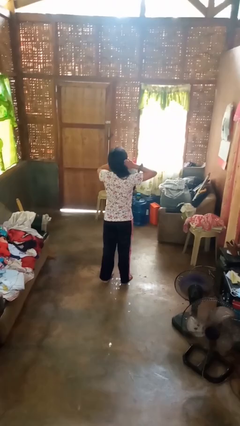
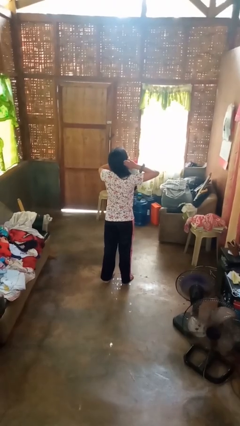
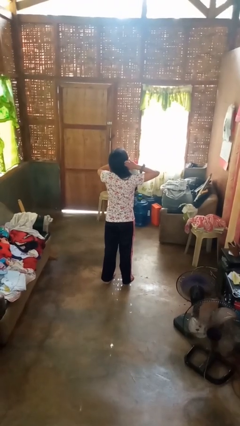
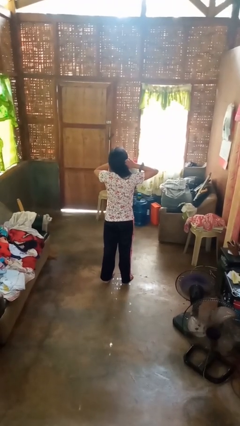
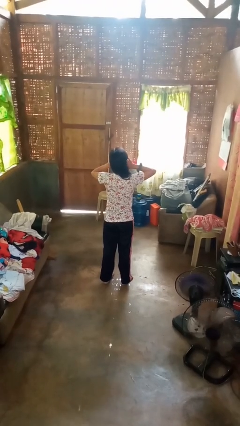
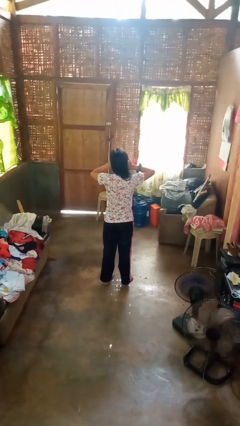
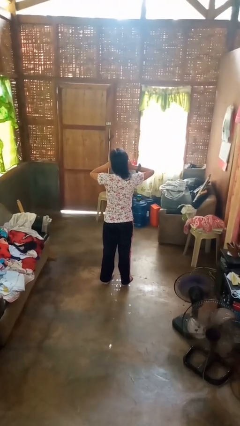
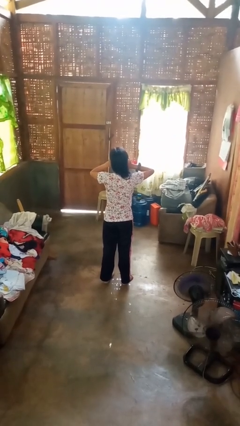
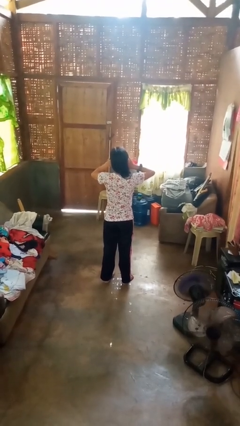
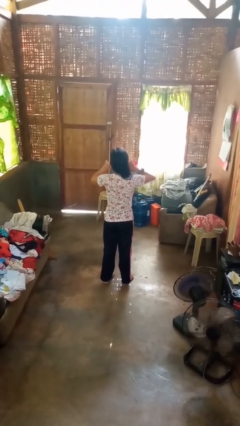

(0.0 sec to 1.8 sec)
person puts fingers in ear

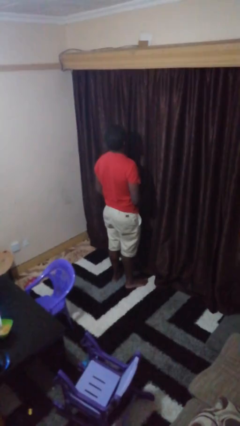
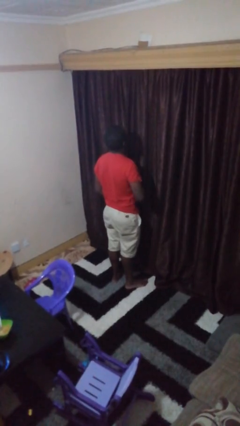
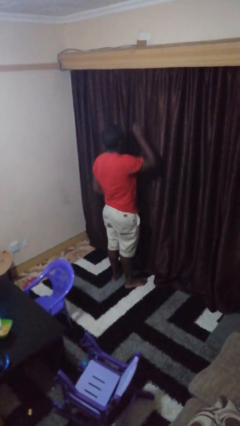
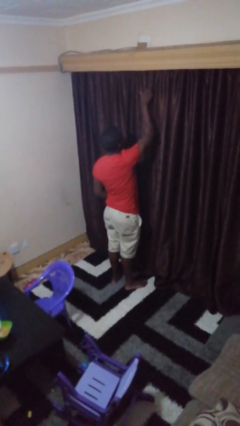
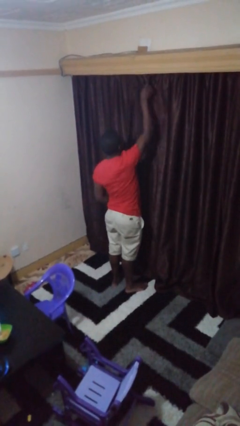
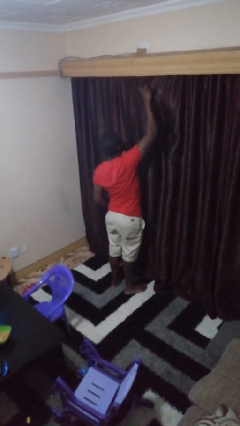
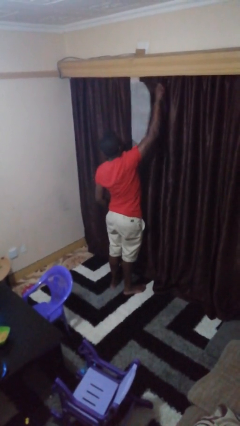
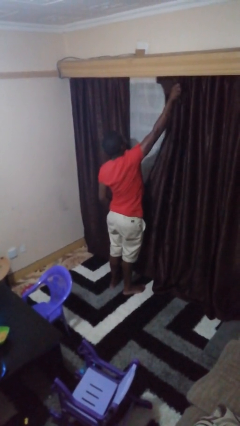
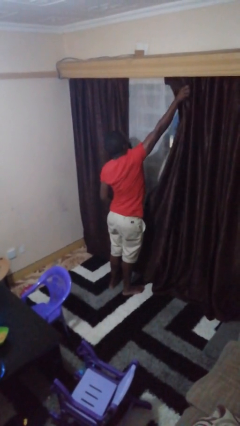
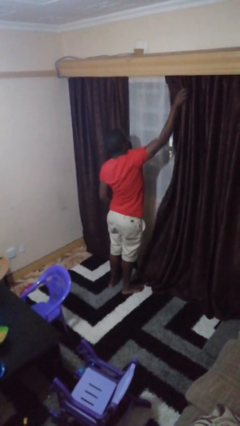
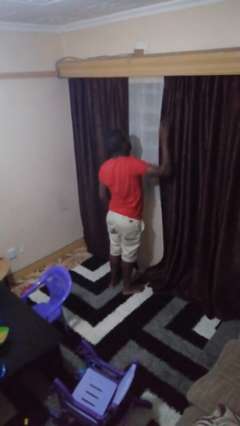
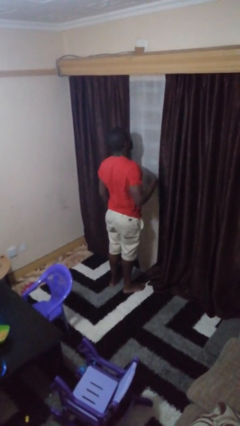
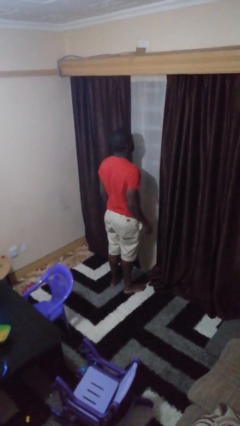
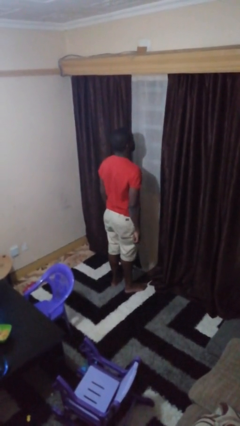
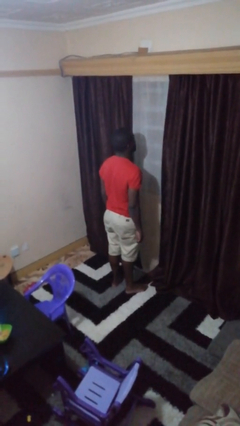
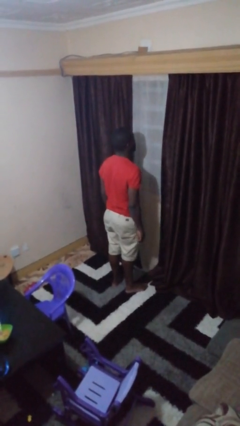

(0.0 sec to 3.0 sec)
person opens curtains

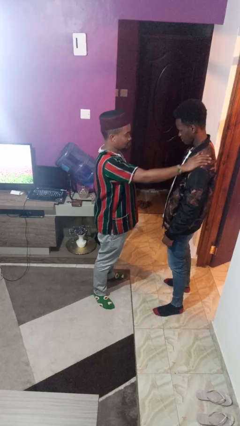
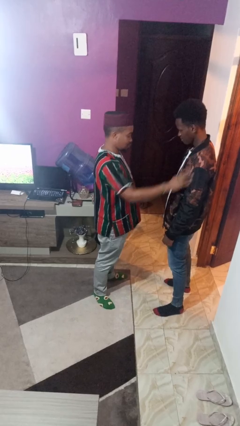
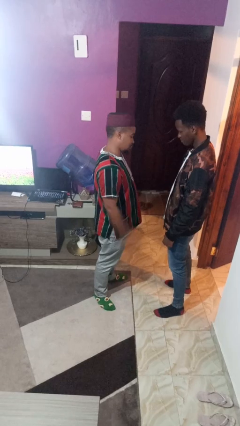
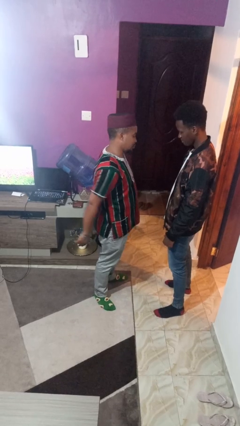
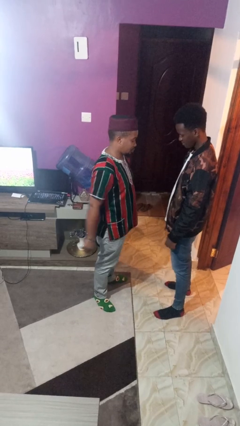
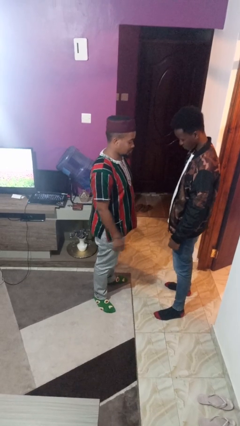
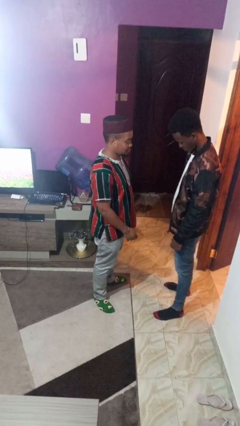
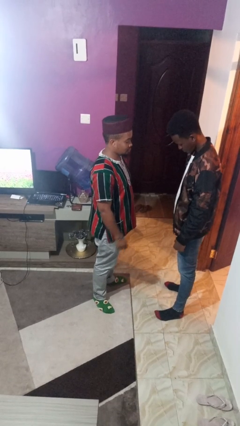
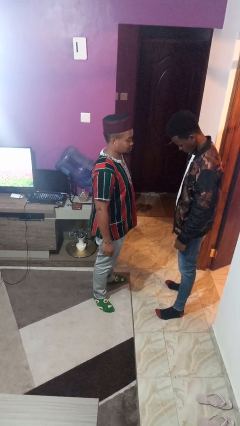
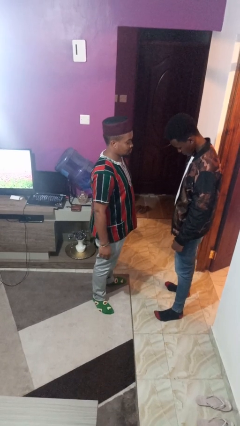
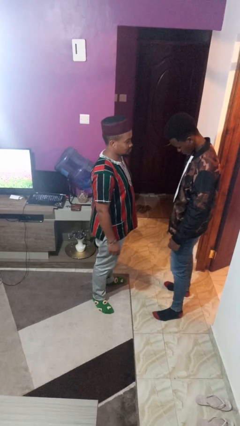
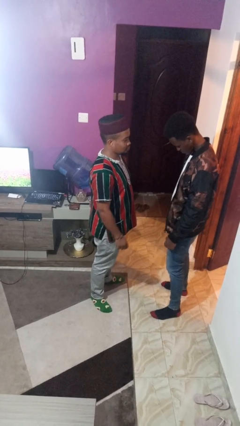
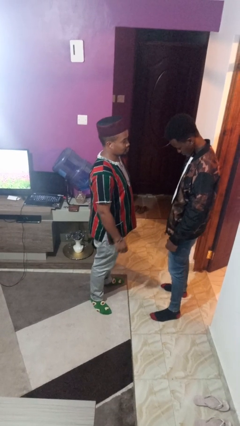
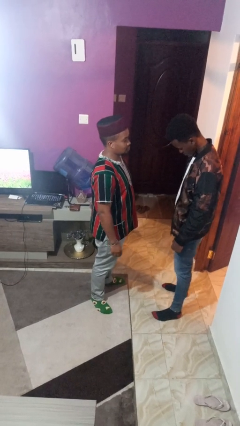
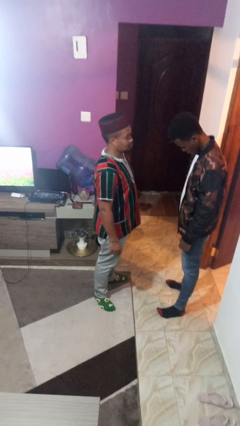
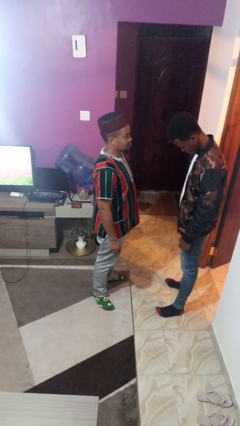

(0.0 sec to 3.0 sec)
person closes door with foot

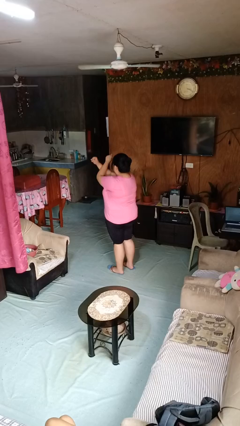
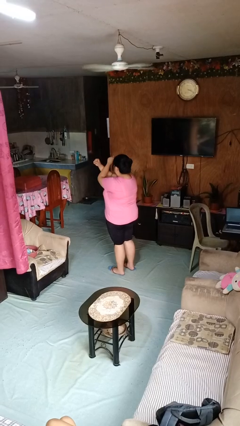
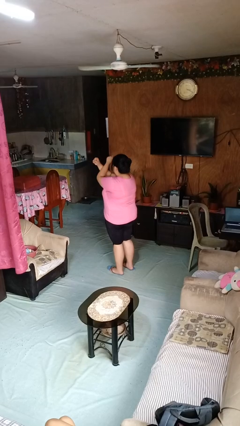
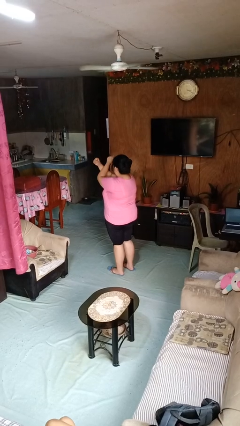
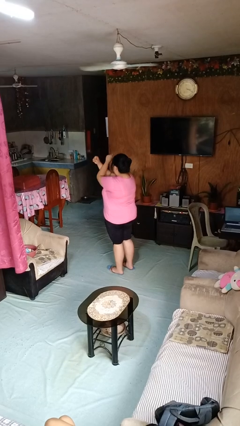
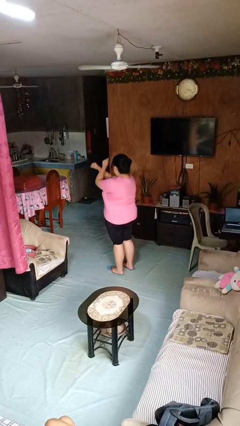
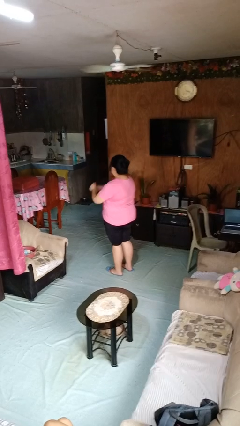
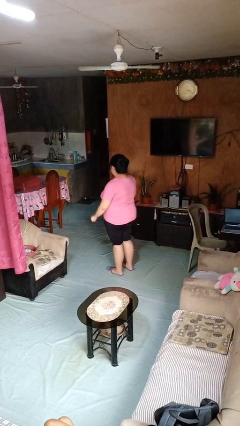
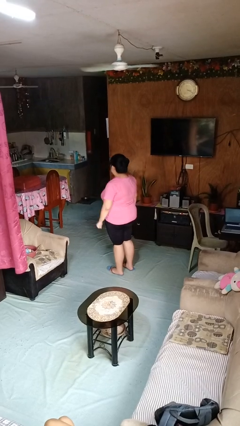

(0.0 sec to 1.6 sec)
person gestures arms x

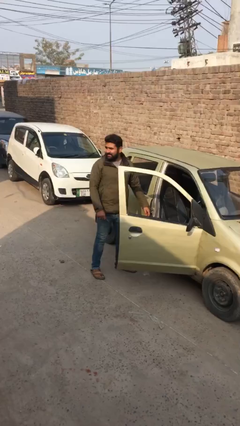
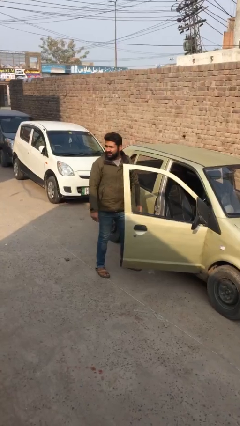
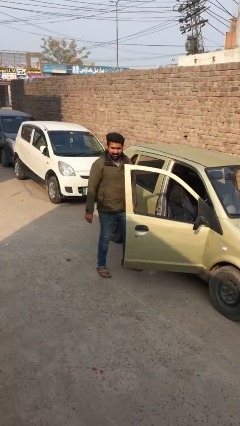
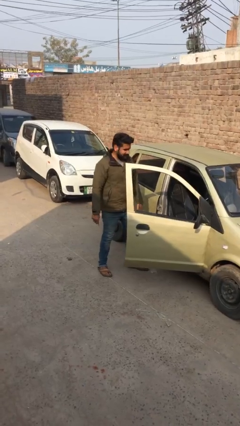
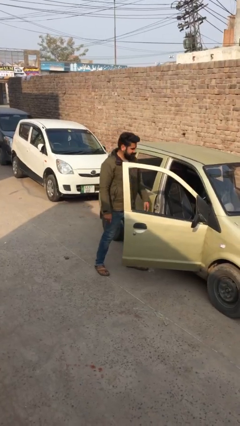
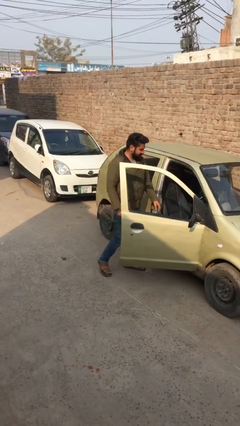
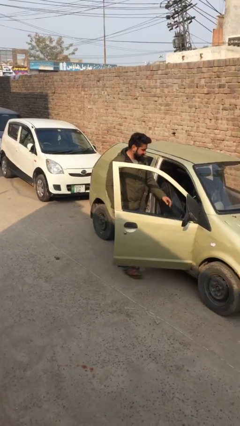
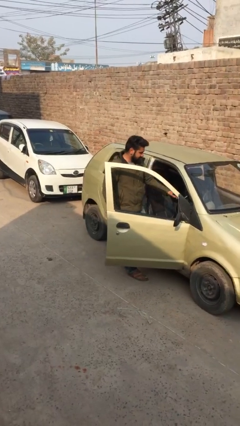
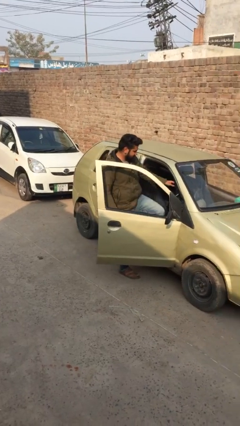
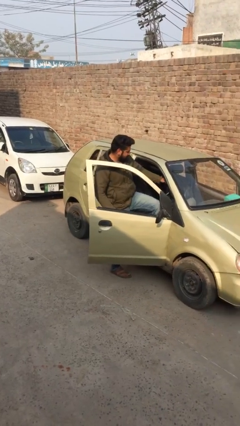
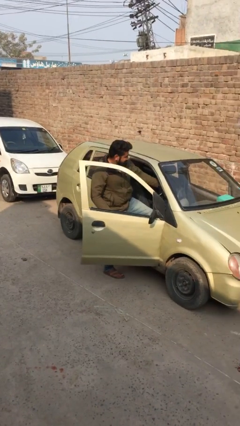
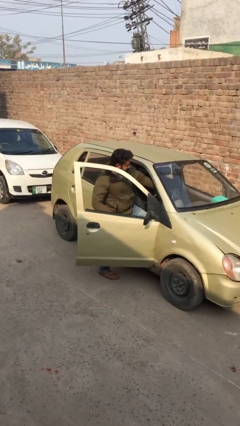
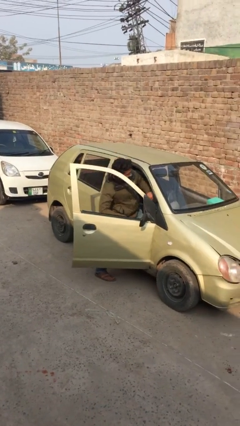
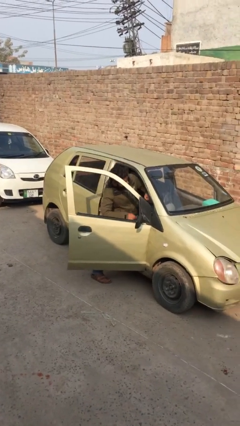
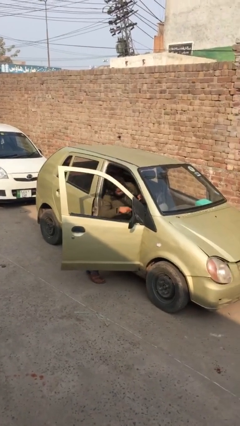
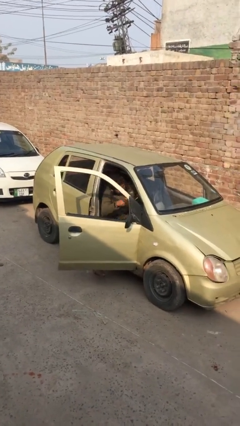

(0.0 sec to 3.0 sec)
person enters car

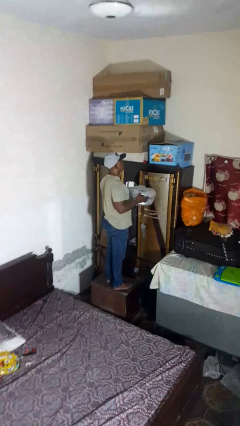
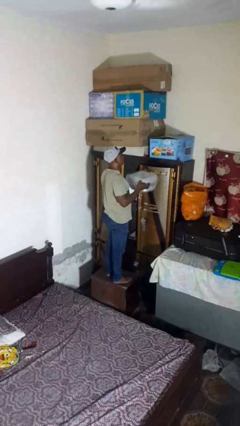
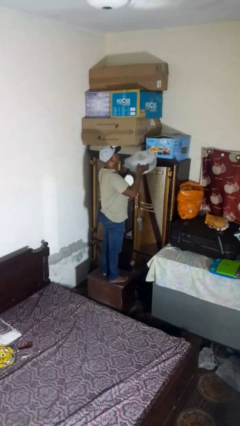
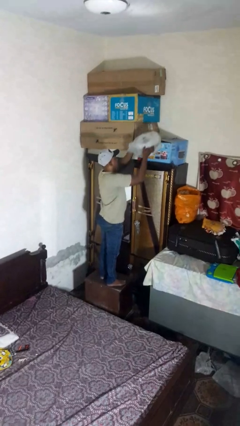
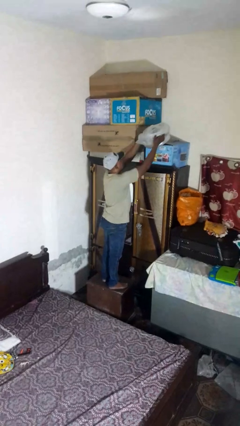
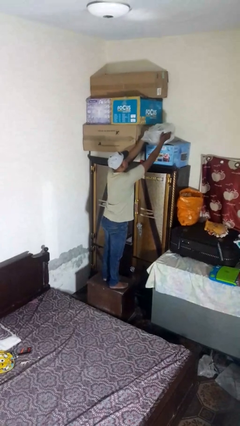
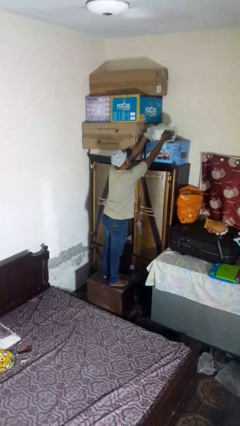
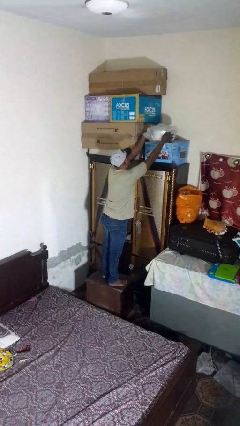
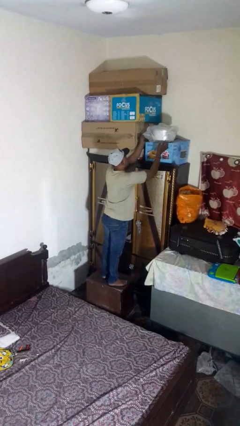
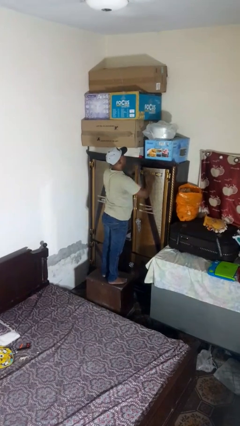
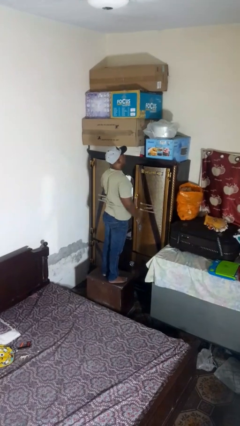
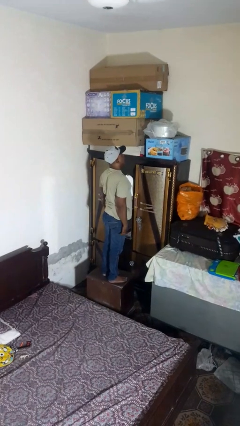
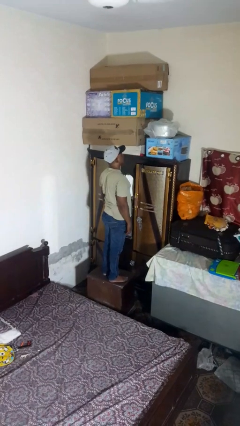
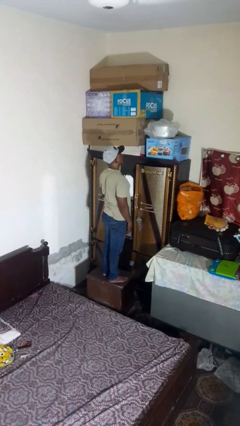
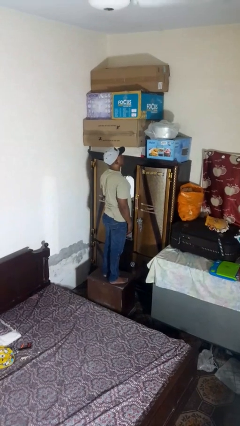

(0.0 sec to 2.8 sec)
person picks up object from shelf

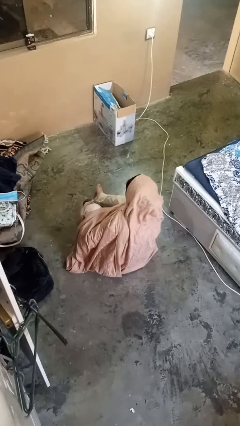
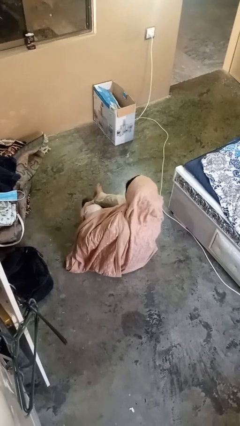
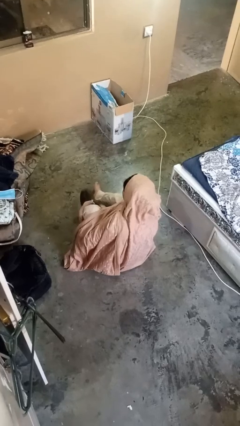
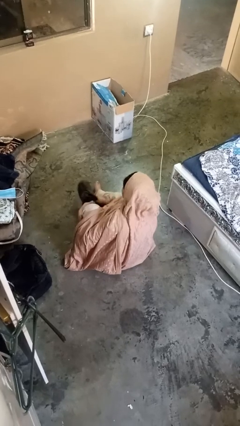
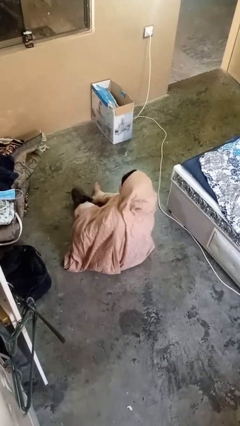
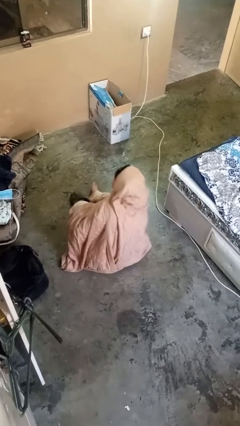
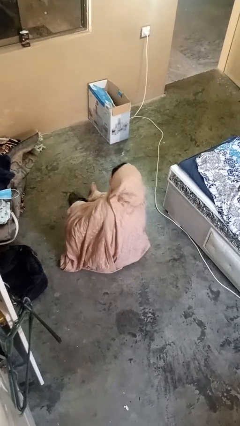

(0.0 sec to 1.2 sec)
person takes off shoes

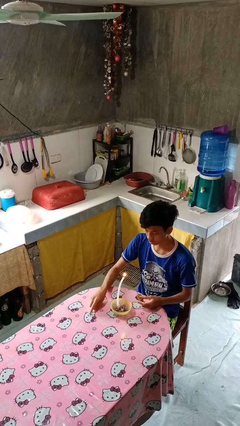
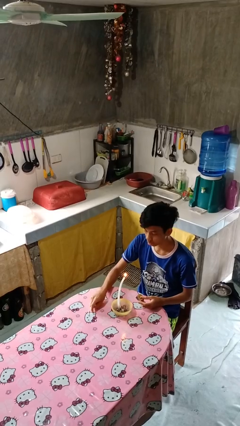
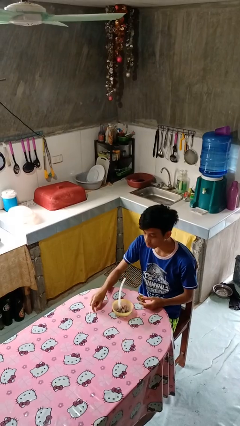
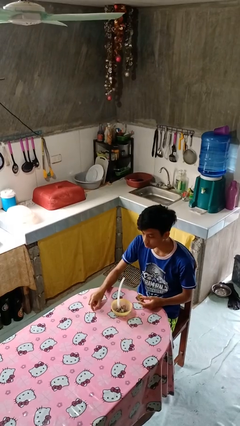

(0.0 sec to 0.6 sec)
person extinguishes candle
